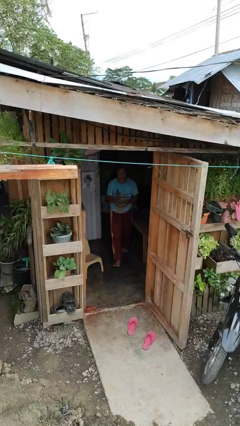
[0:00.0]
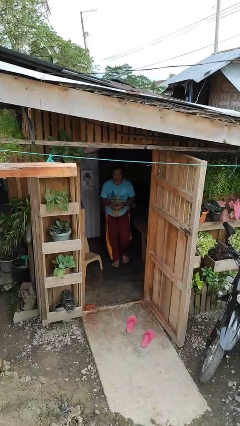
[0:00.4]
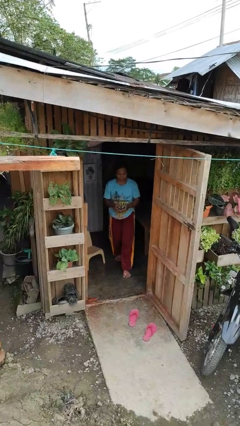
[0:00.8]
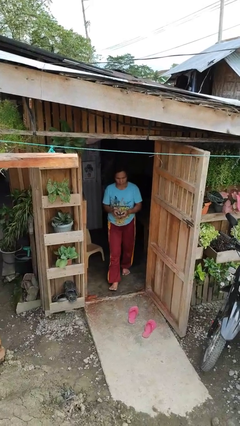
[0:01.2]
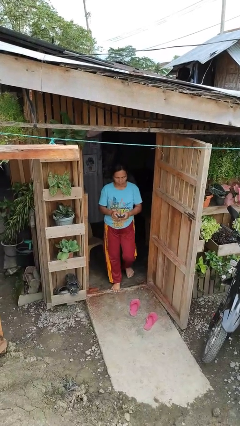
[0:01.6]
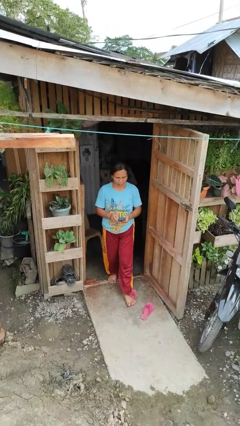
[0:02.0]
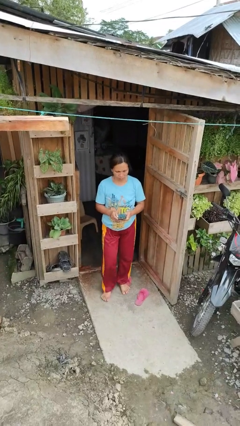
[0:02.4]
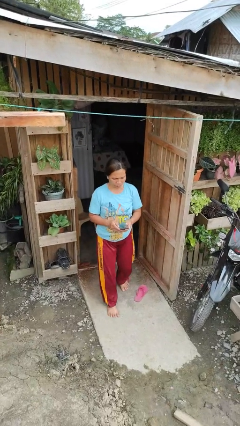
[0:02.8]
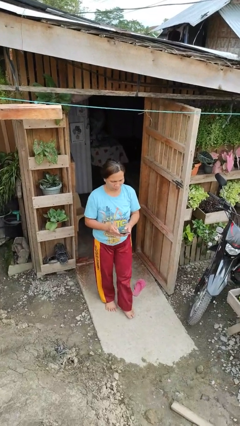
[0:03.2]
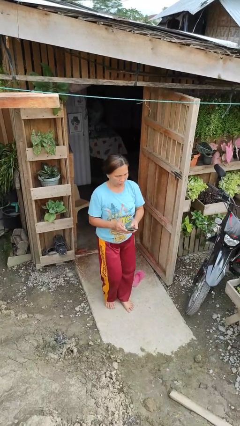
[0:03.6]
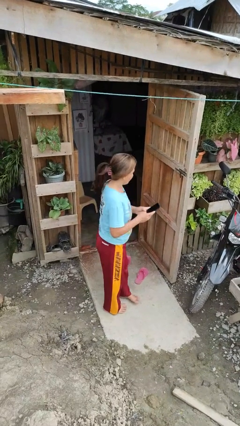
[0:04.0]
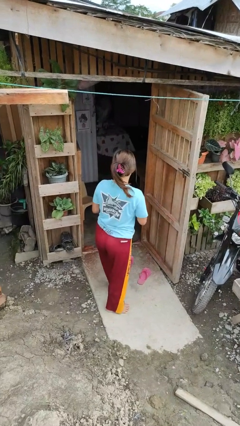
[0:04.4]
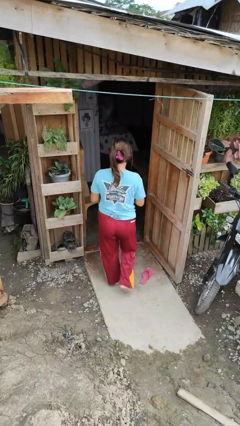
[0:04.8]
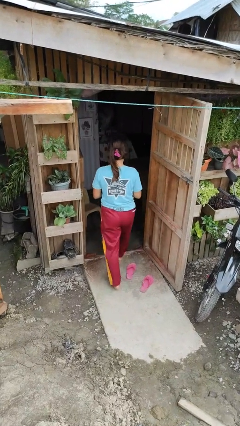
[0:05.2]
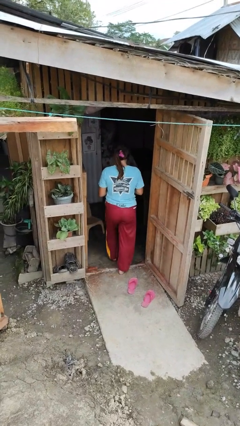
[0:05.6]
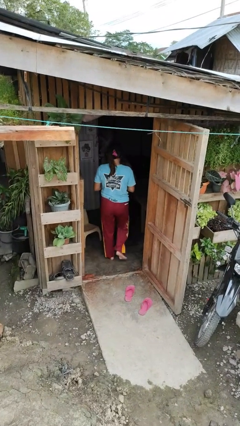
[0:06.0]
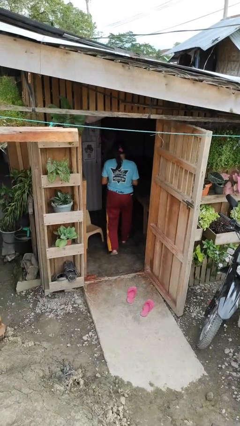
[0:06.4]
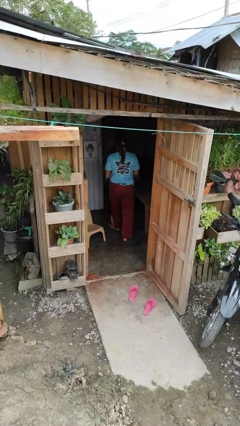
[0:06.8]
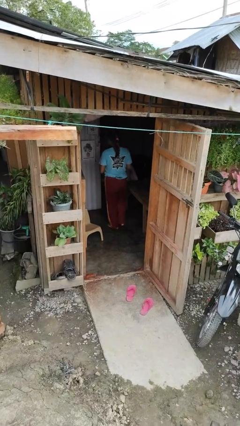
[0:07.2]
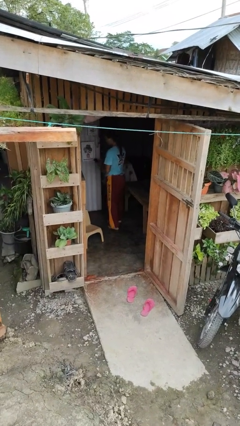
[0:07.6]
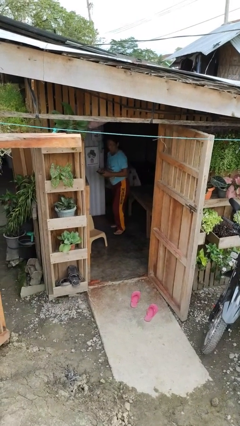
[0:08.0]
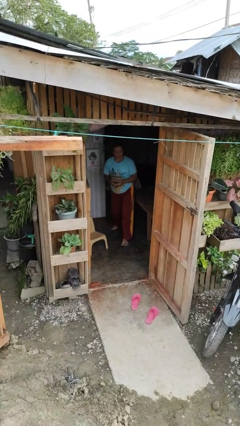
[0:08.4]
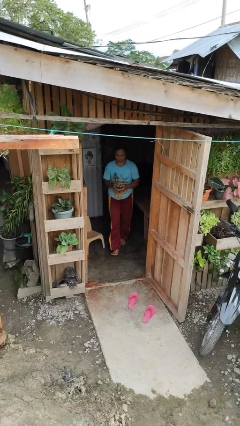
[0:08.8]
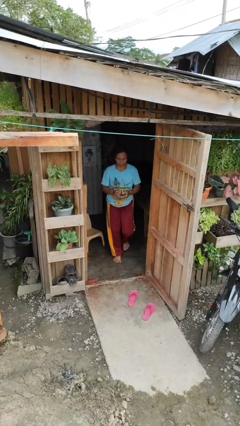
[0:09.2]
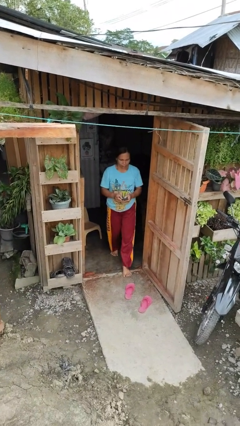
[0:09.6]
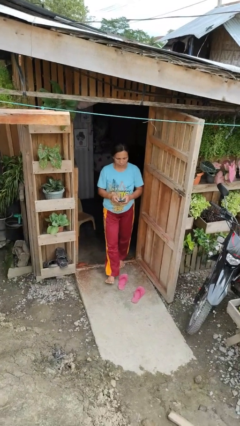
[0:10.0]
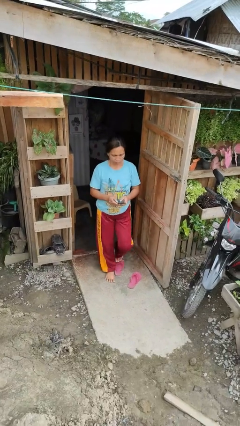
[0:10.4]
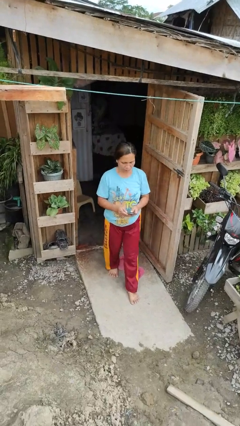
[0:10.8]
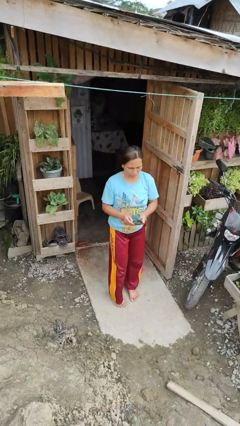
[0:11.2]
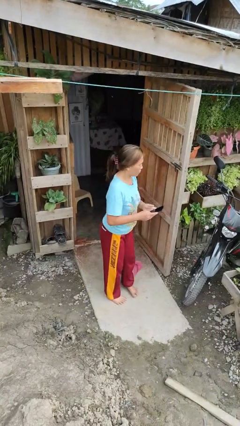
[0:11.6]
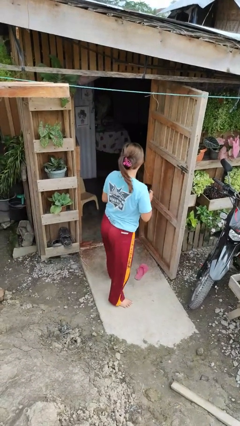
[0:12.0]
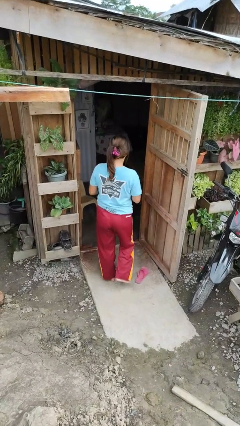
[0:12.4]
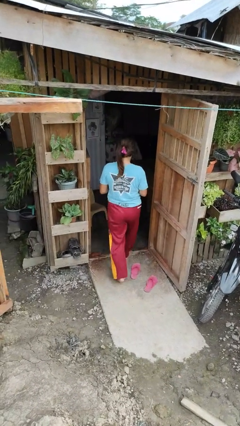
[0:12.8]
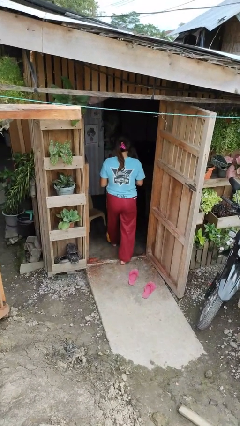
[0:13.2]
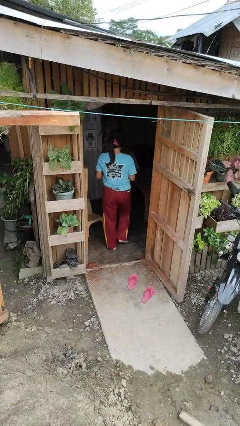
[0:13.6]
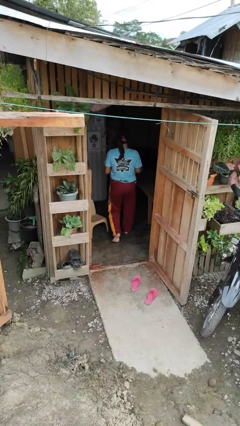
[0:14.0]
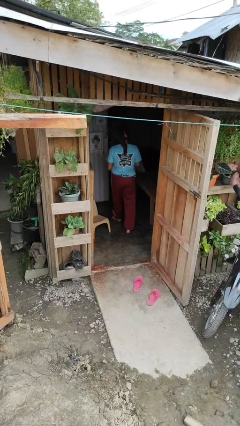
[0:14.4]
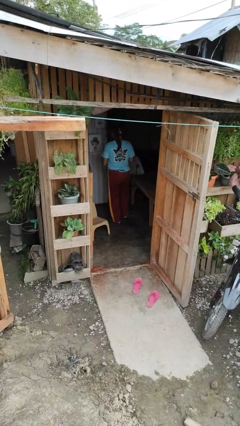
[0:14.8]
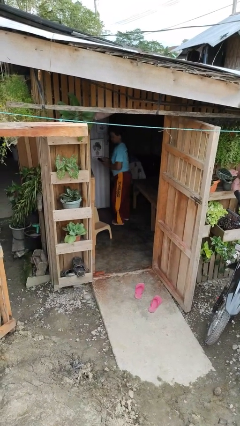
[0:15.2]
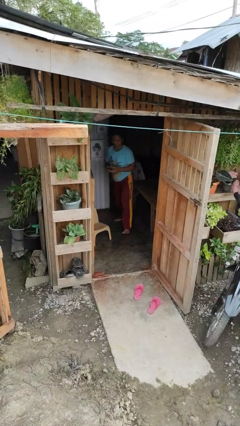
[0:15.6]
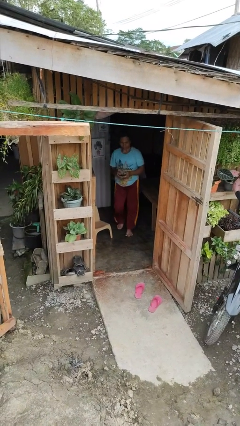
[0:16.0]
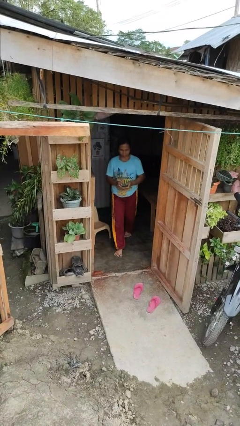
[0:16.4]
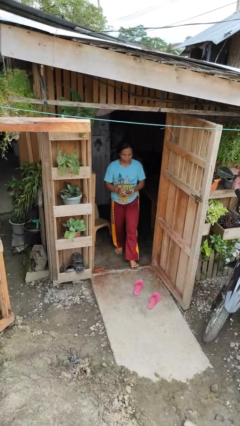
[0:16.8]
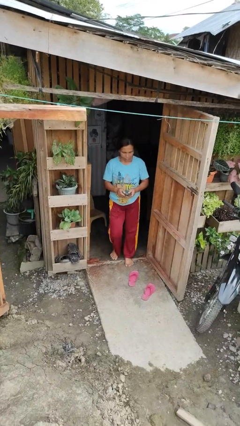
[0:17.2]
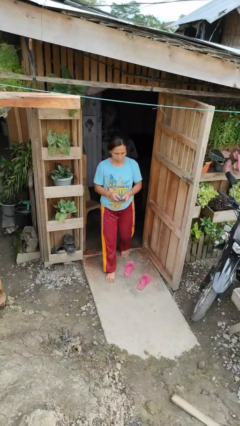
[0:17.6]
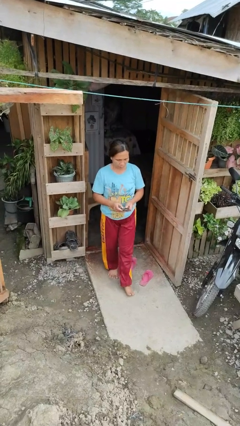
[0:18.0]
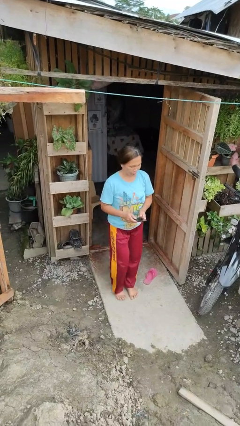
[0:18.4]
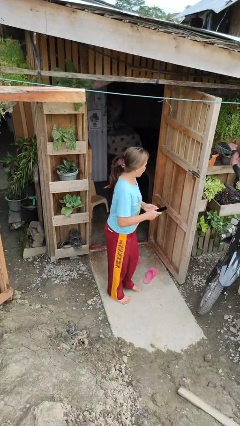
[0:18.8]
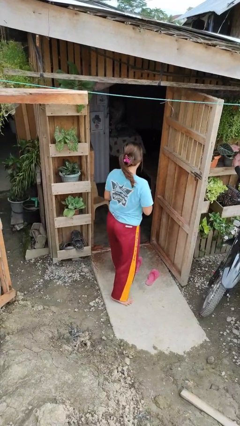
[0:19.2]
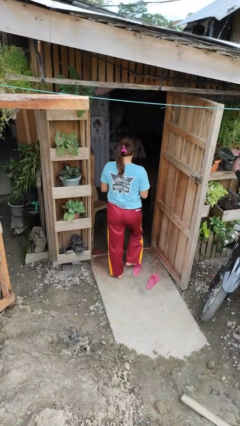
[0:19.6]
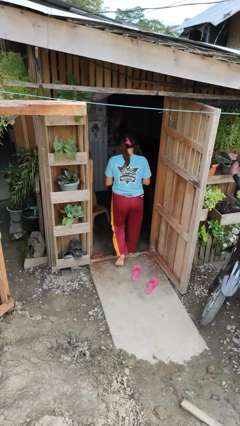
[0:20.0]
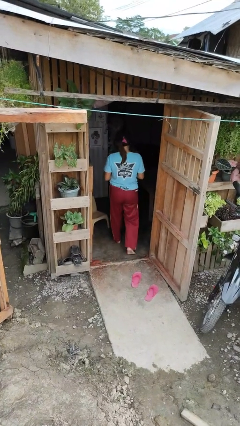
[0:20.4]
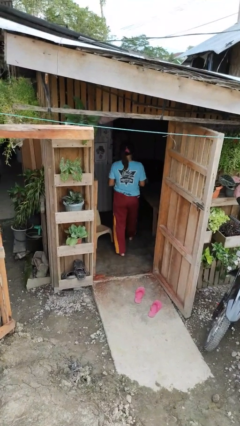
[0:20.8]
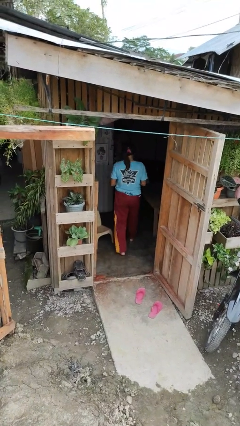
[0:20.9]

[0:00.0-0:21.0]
person texts on phone

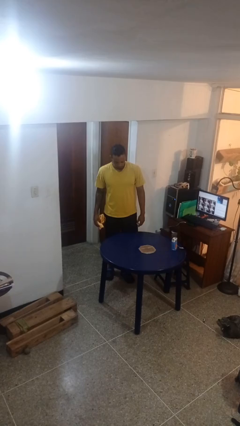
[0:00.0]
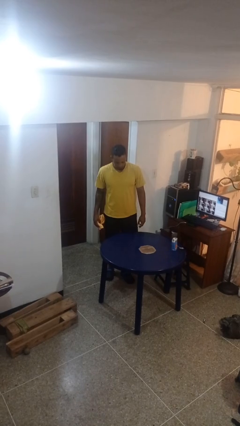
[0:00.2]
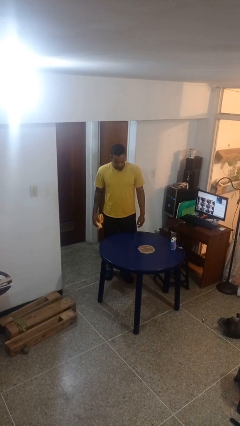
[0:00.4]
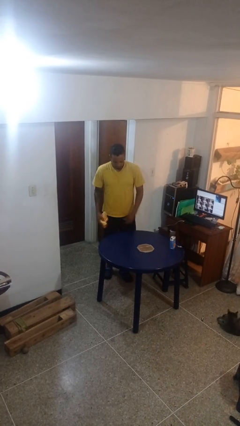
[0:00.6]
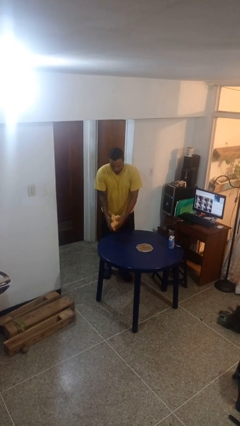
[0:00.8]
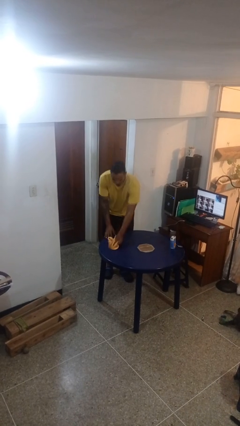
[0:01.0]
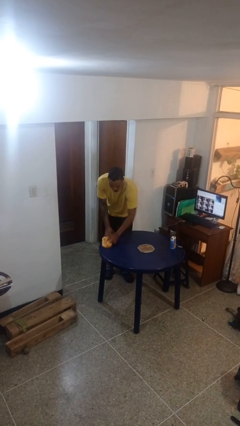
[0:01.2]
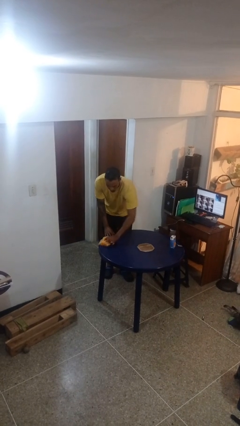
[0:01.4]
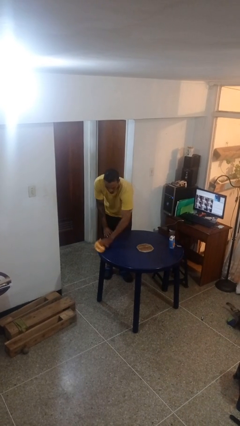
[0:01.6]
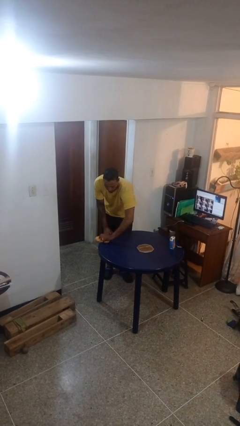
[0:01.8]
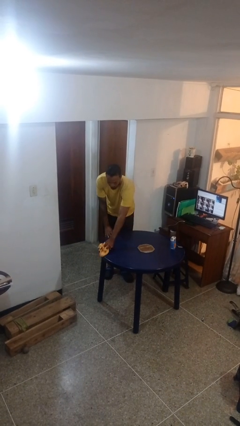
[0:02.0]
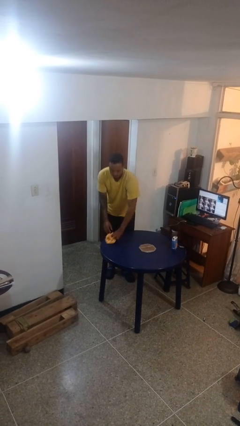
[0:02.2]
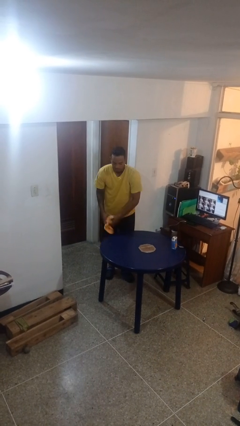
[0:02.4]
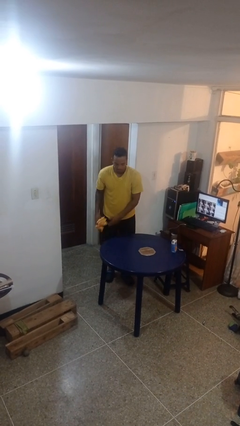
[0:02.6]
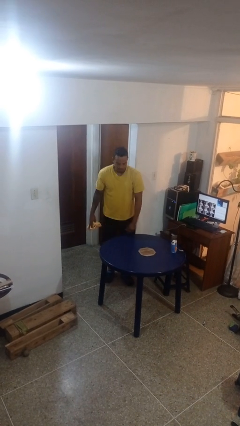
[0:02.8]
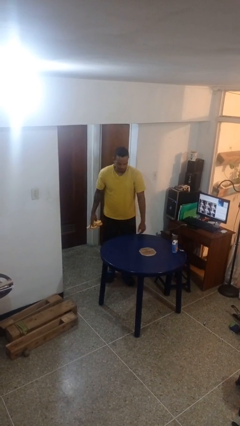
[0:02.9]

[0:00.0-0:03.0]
person cleans table with rag

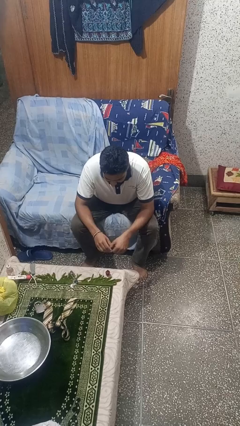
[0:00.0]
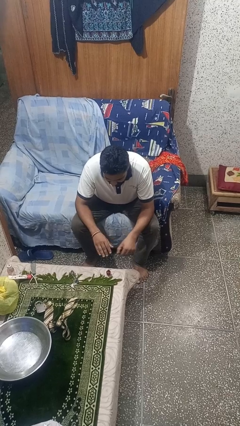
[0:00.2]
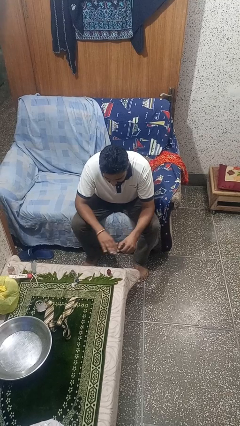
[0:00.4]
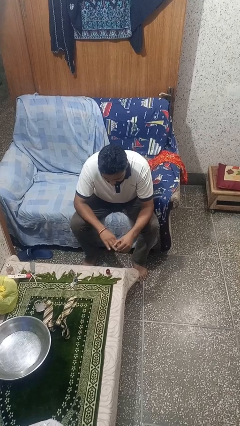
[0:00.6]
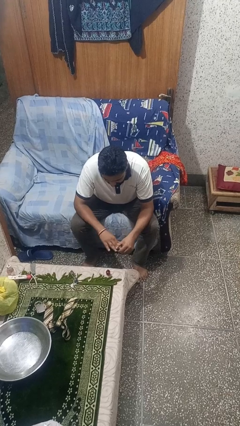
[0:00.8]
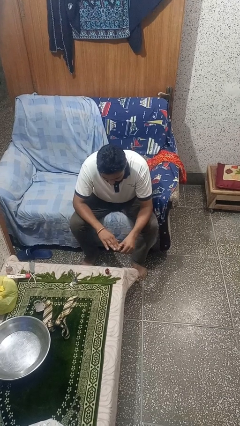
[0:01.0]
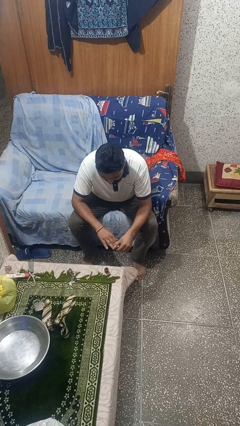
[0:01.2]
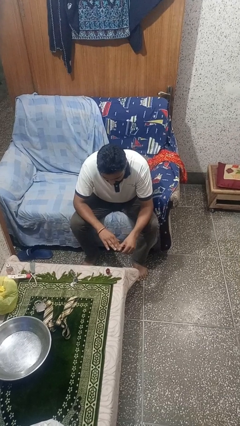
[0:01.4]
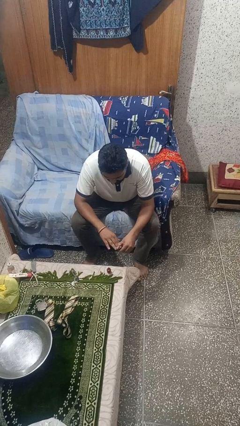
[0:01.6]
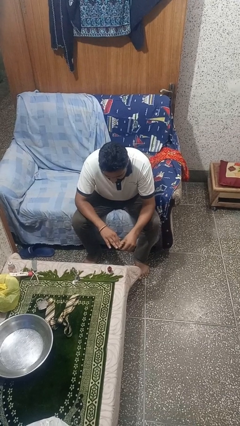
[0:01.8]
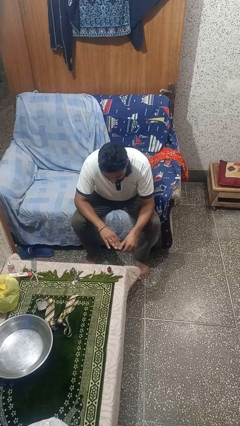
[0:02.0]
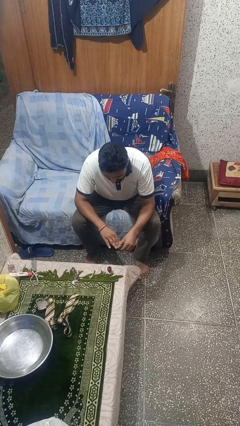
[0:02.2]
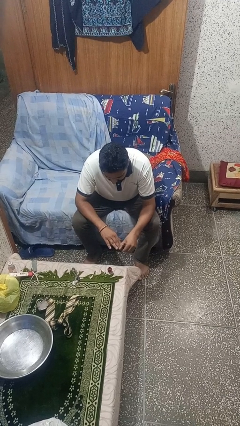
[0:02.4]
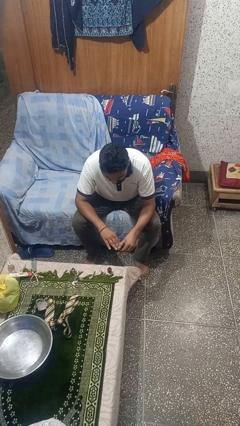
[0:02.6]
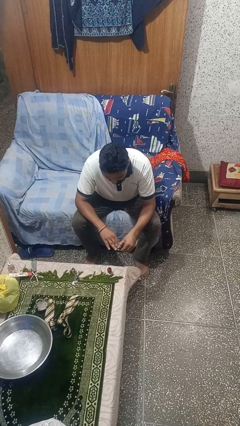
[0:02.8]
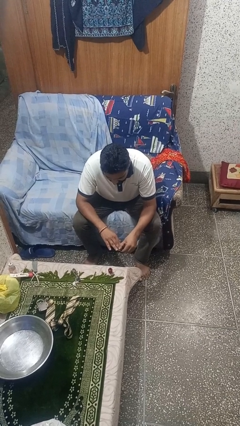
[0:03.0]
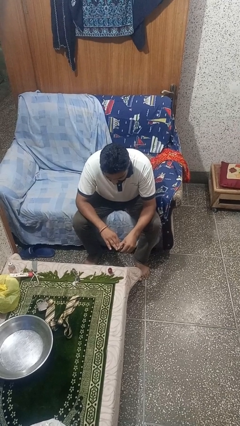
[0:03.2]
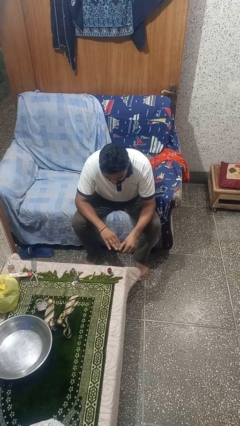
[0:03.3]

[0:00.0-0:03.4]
person paints fingernails

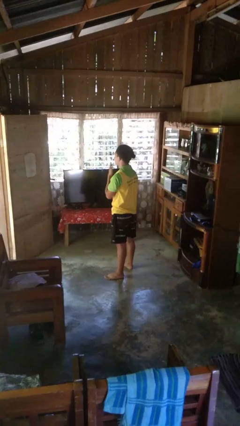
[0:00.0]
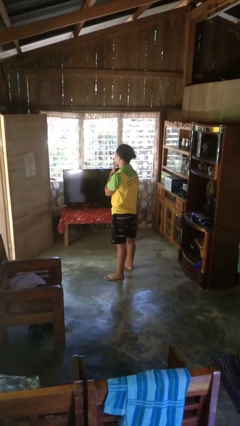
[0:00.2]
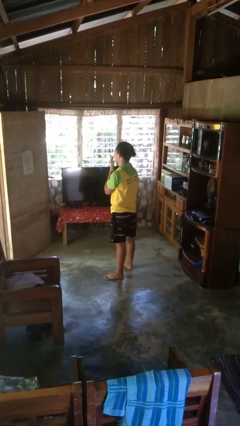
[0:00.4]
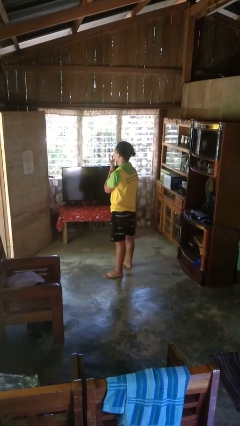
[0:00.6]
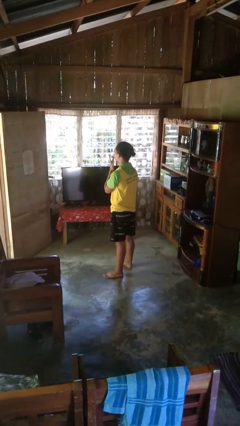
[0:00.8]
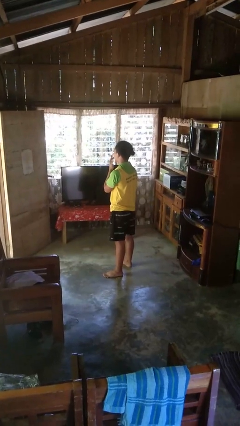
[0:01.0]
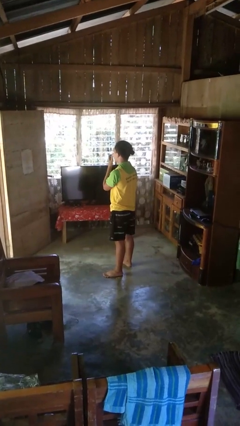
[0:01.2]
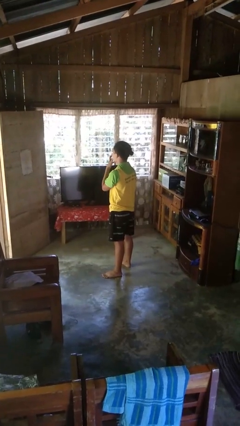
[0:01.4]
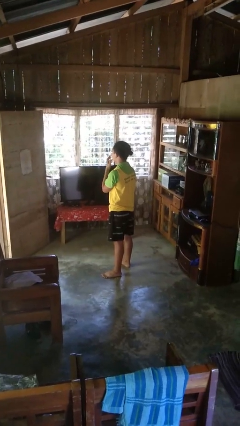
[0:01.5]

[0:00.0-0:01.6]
person licks fingers
